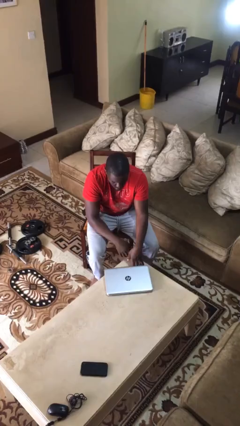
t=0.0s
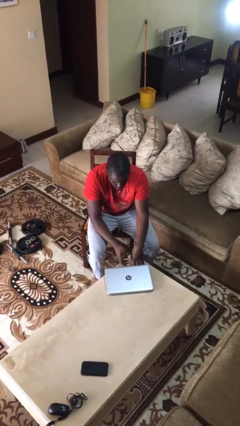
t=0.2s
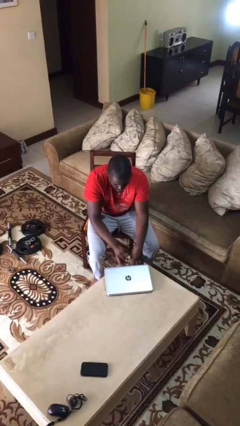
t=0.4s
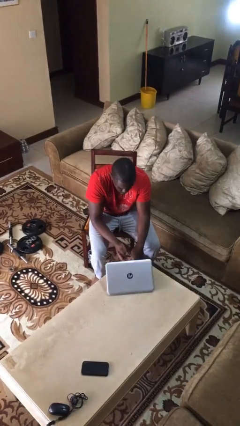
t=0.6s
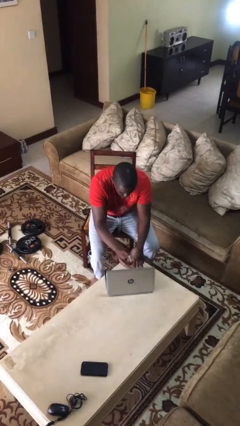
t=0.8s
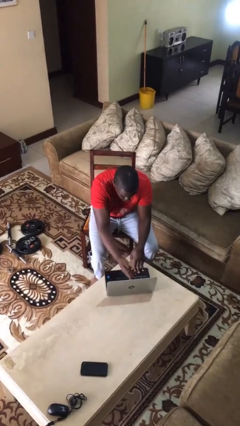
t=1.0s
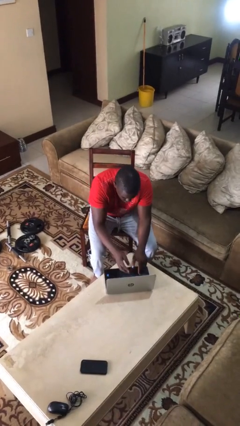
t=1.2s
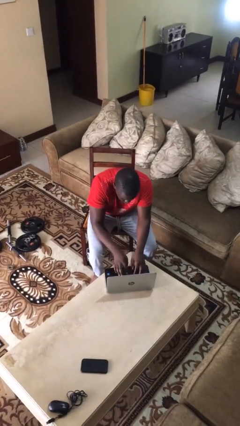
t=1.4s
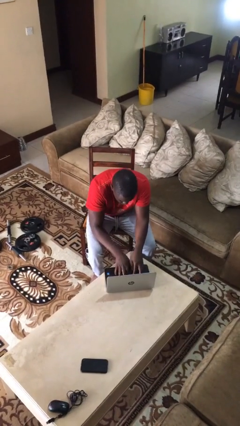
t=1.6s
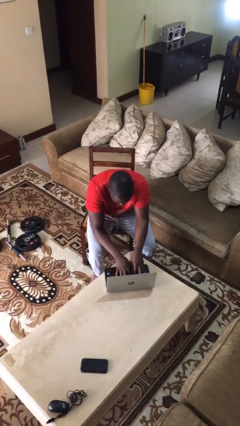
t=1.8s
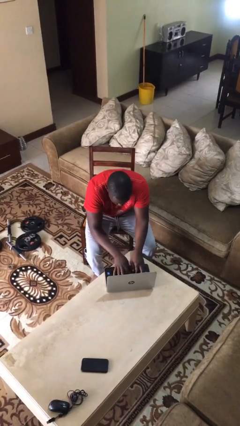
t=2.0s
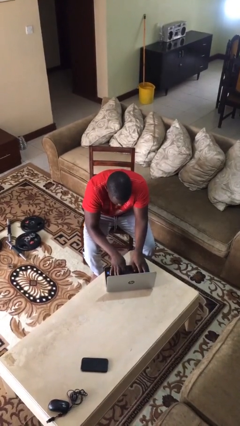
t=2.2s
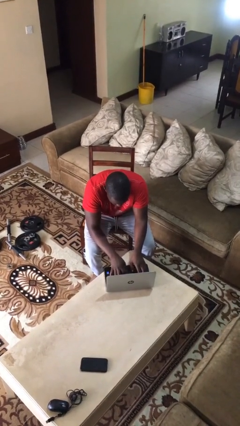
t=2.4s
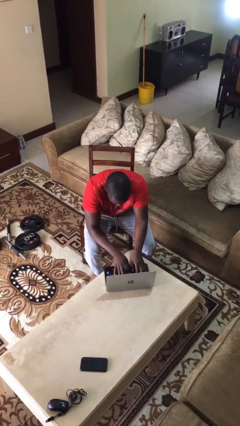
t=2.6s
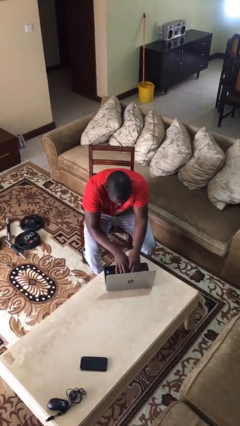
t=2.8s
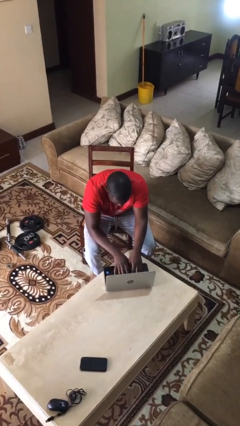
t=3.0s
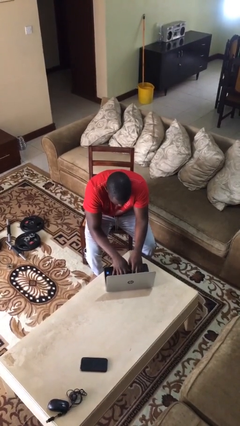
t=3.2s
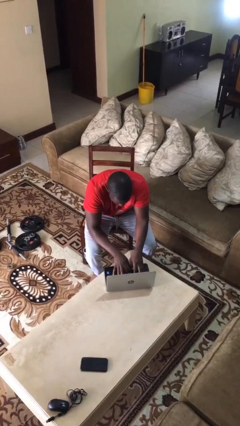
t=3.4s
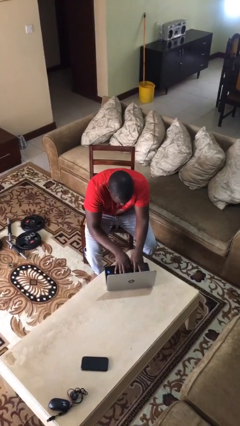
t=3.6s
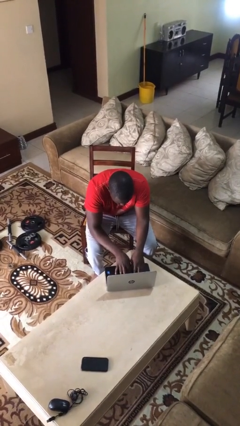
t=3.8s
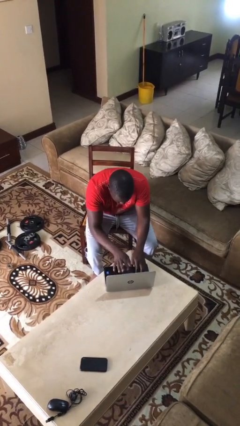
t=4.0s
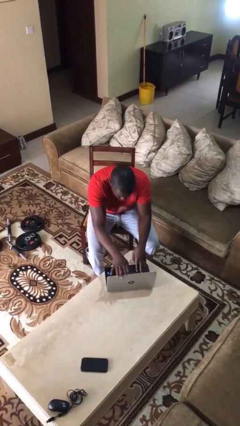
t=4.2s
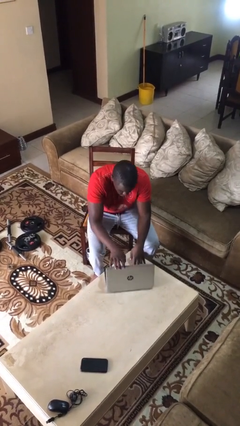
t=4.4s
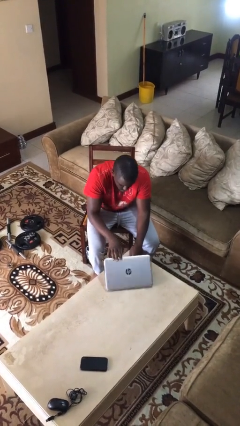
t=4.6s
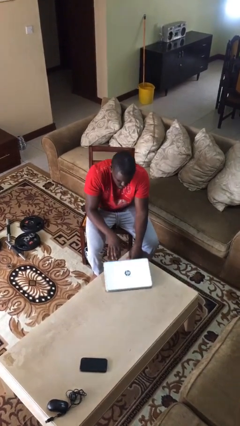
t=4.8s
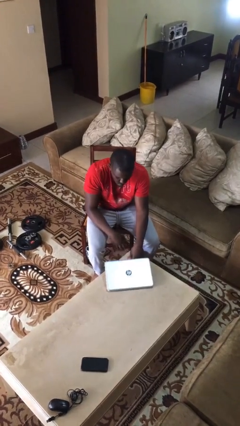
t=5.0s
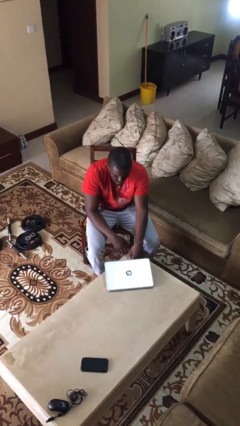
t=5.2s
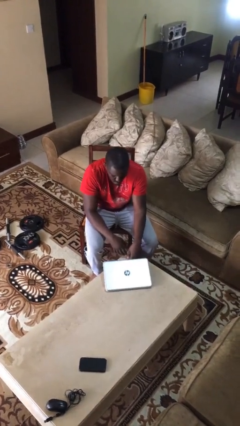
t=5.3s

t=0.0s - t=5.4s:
person interacts with laptop

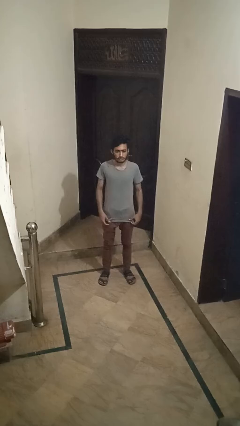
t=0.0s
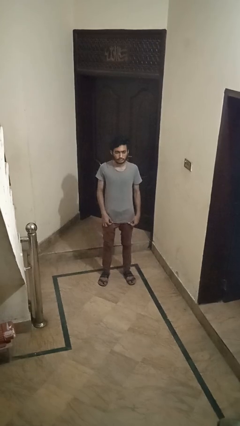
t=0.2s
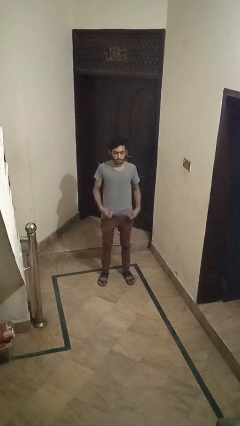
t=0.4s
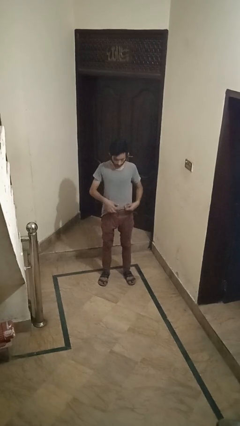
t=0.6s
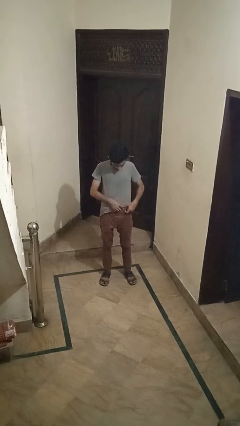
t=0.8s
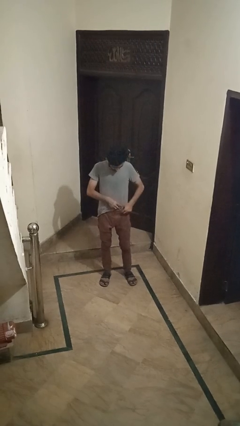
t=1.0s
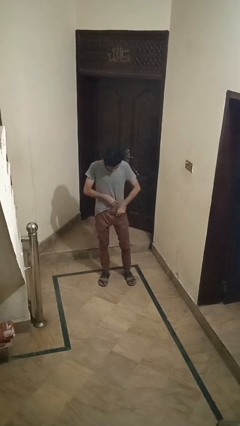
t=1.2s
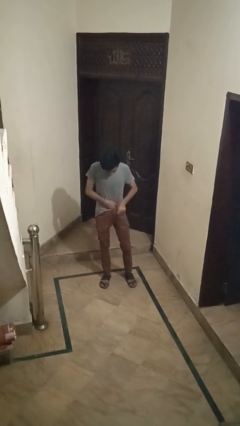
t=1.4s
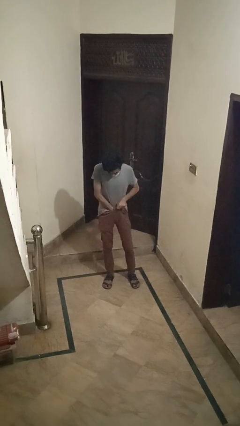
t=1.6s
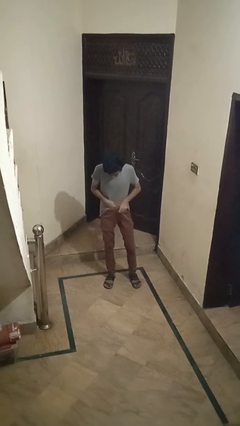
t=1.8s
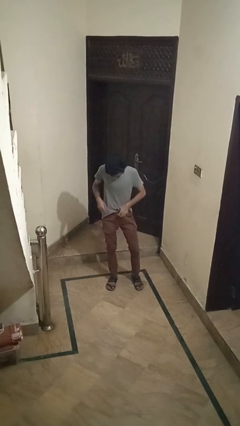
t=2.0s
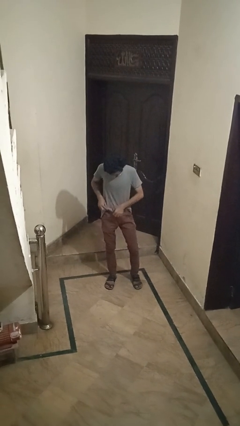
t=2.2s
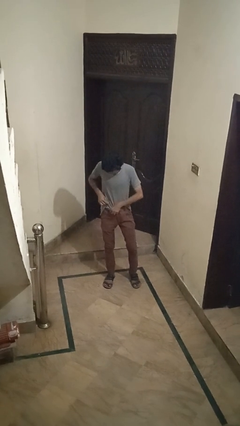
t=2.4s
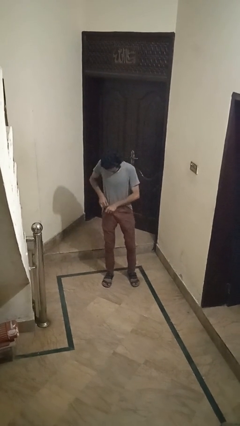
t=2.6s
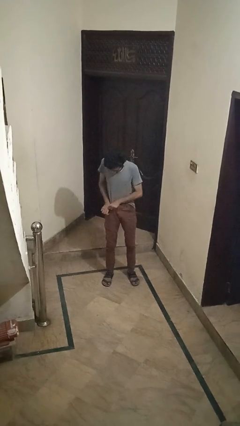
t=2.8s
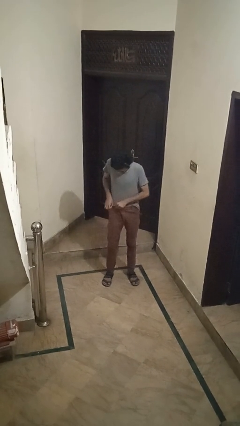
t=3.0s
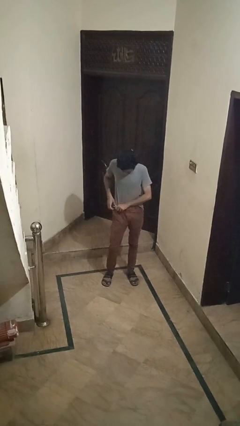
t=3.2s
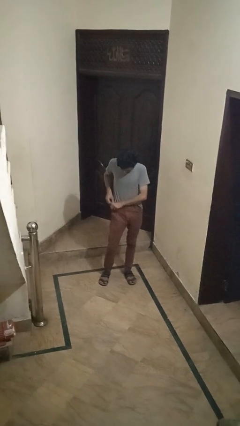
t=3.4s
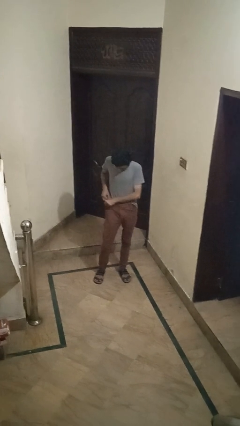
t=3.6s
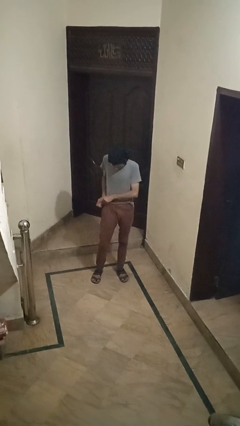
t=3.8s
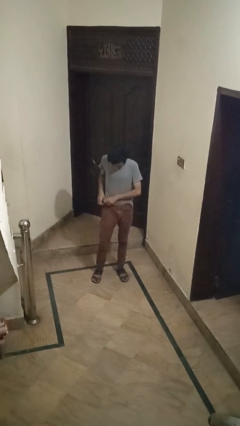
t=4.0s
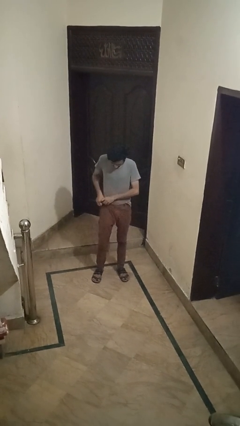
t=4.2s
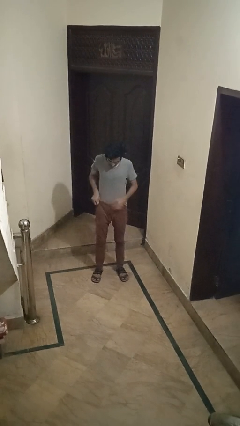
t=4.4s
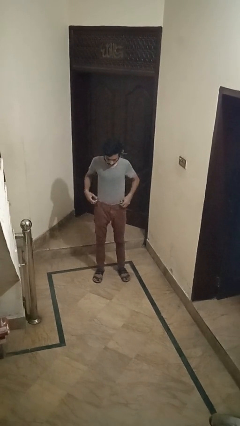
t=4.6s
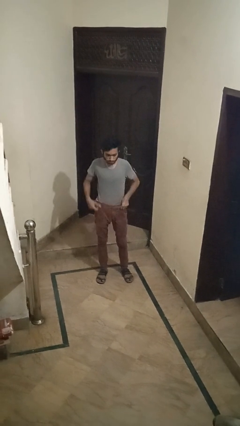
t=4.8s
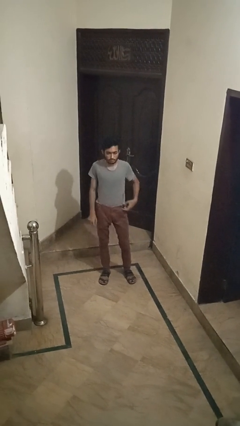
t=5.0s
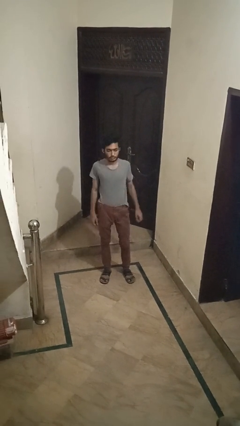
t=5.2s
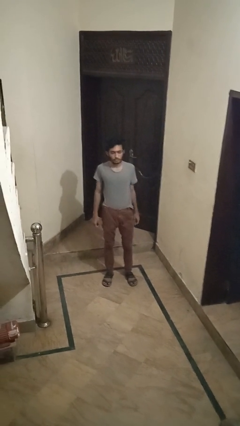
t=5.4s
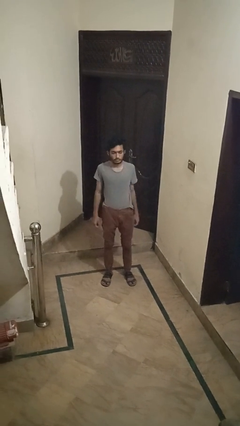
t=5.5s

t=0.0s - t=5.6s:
person tucks in shirt

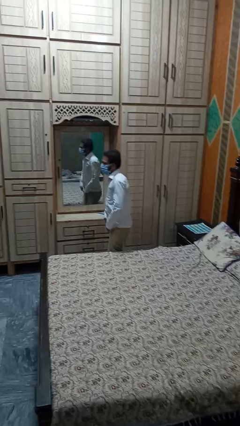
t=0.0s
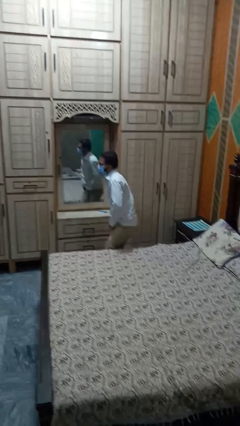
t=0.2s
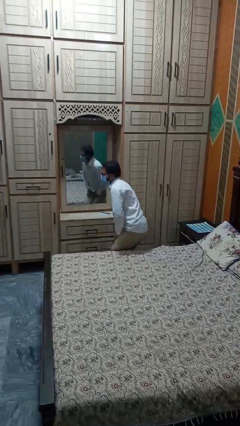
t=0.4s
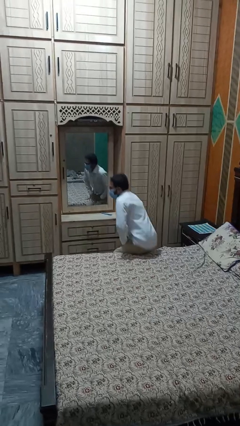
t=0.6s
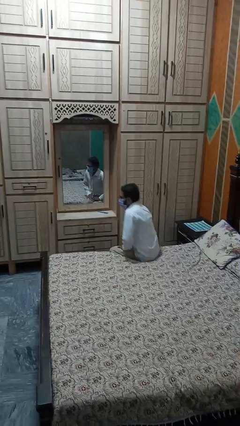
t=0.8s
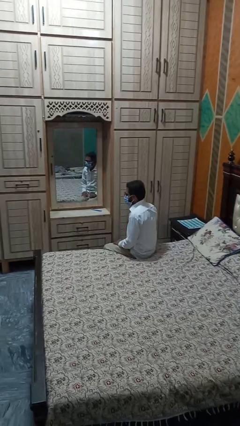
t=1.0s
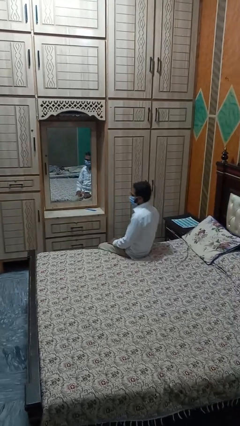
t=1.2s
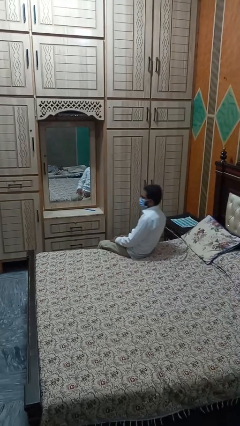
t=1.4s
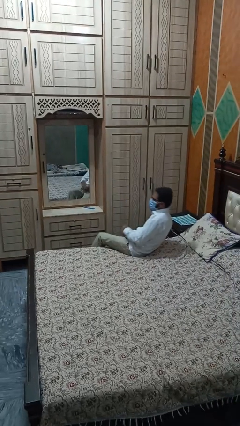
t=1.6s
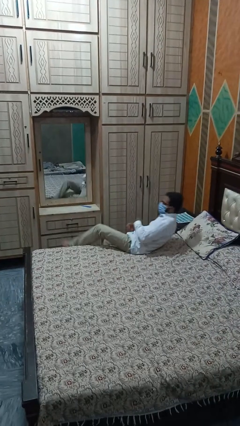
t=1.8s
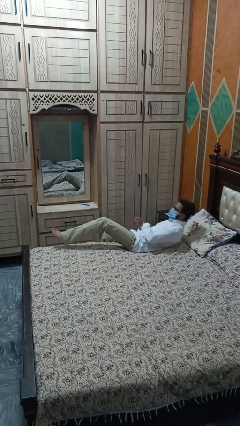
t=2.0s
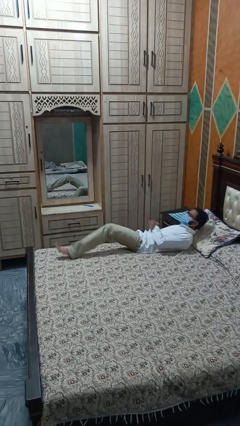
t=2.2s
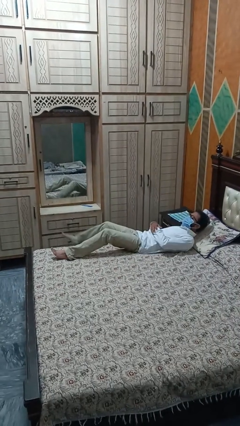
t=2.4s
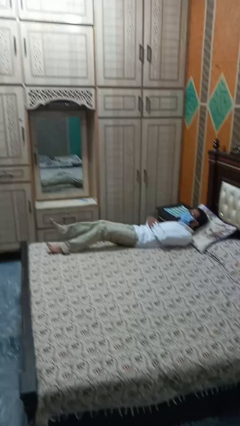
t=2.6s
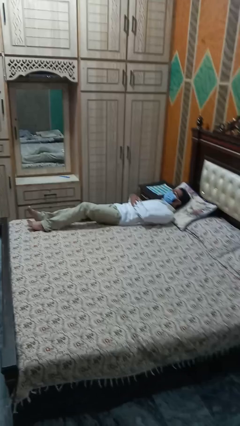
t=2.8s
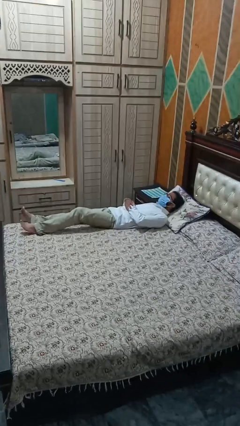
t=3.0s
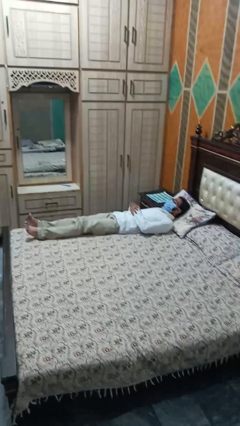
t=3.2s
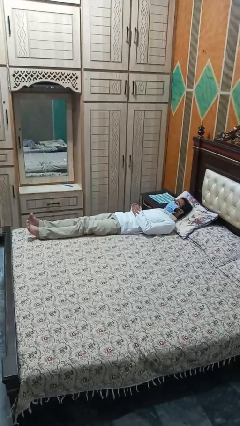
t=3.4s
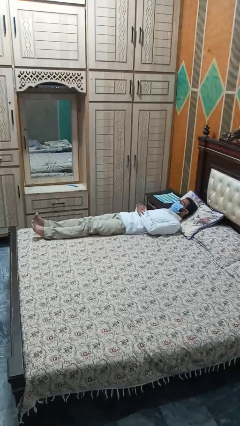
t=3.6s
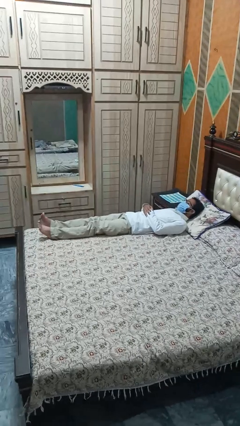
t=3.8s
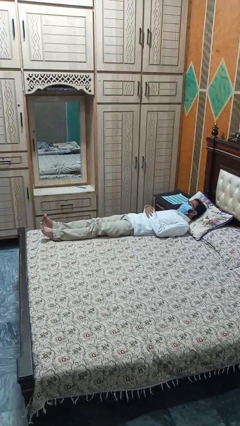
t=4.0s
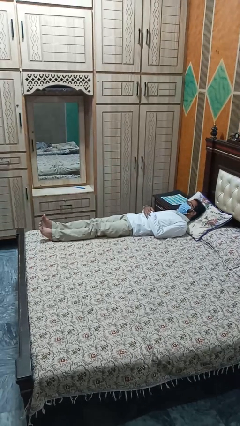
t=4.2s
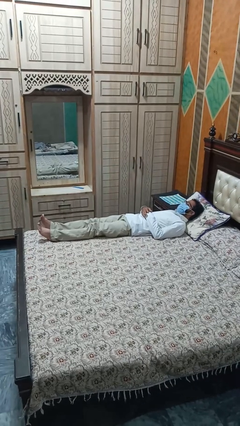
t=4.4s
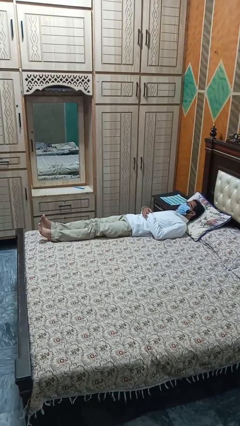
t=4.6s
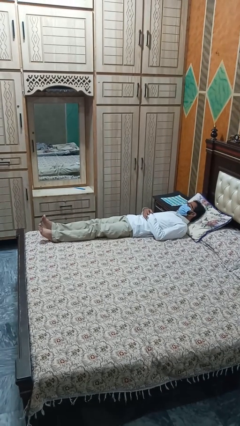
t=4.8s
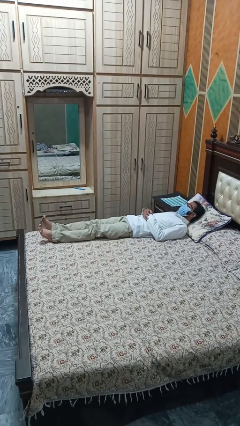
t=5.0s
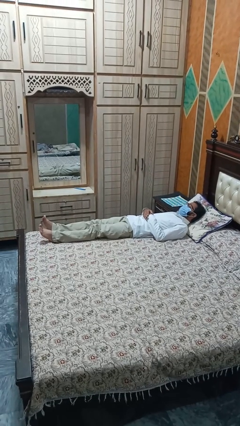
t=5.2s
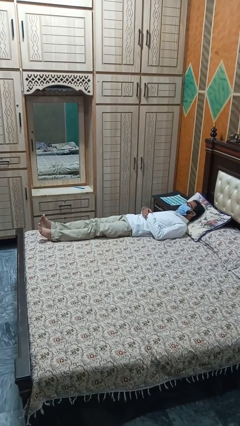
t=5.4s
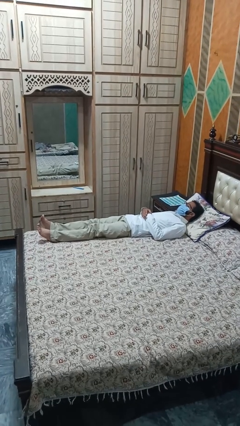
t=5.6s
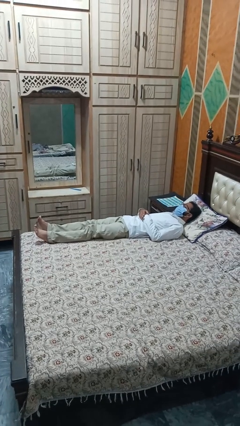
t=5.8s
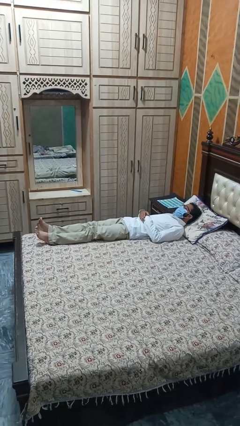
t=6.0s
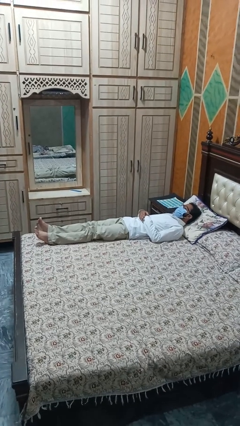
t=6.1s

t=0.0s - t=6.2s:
person lies down on bed

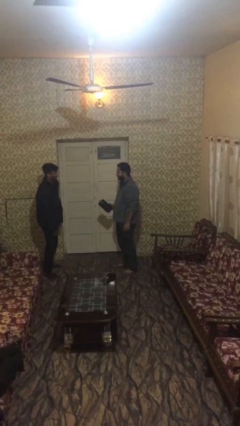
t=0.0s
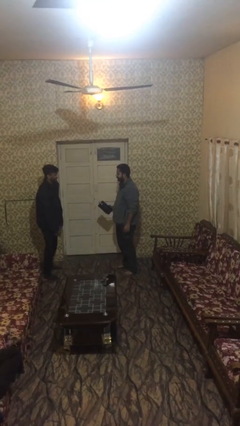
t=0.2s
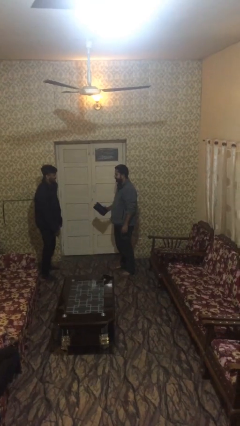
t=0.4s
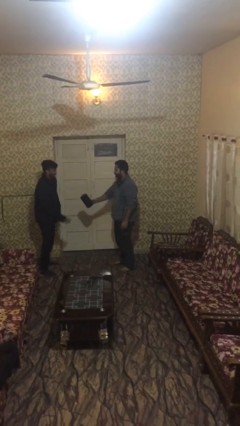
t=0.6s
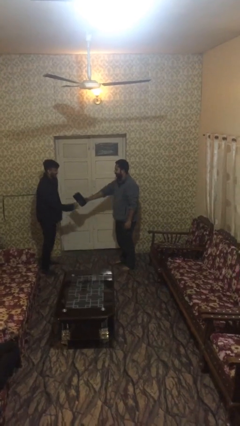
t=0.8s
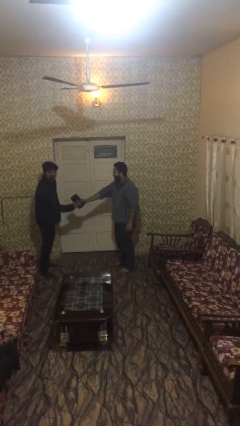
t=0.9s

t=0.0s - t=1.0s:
person transfers object to person
